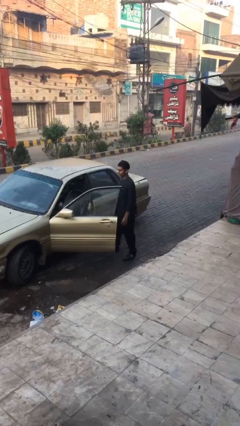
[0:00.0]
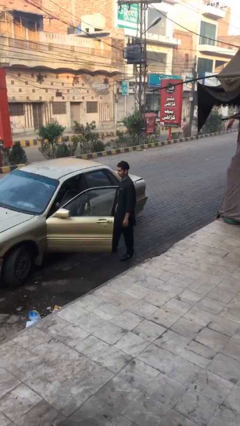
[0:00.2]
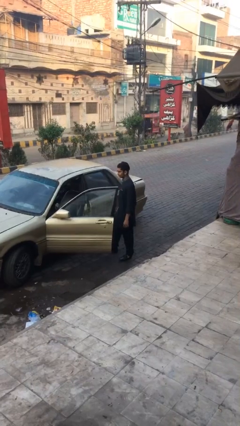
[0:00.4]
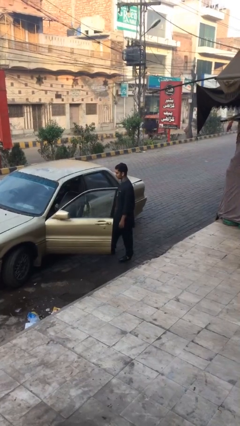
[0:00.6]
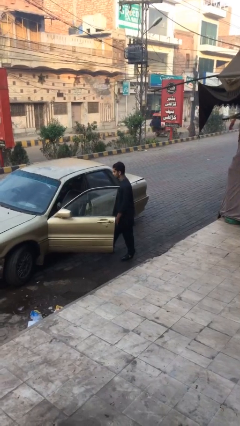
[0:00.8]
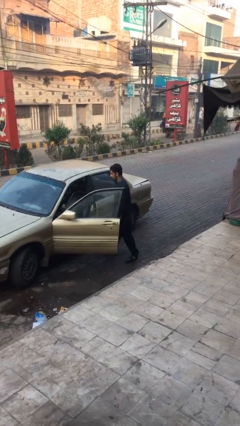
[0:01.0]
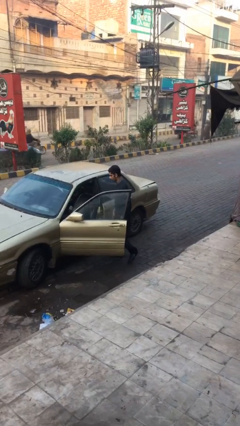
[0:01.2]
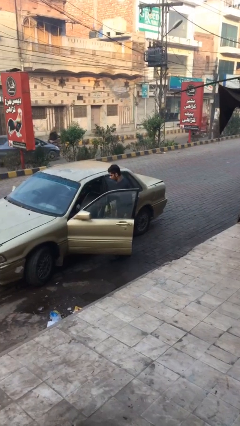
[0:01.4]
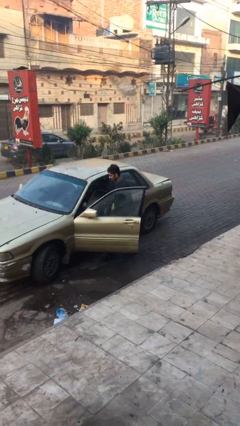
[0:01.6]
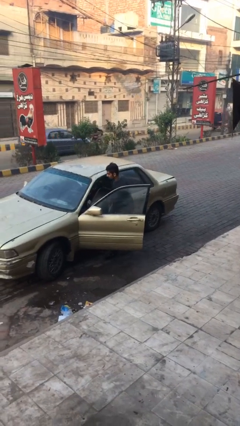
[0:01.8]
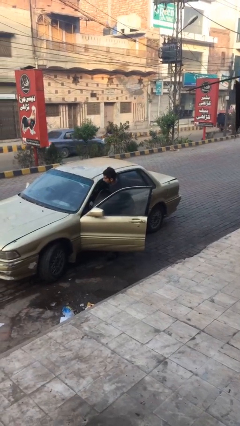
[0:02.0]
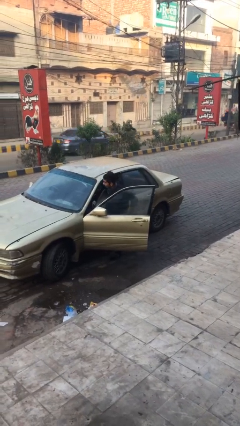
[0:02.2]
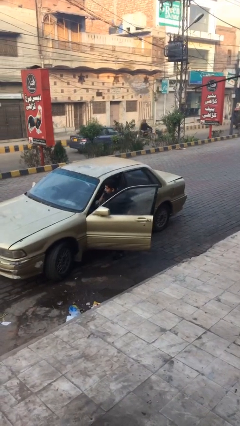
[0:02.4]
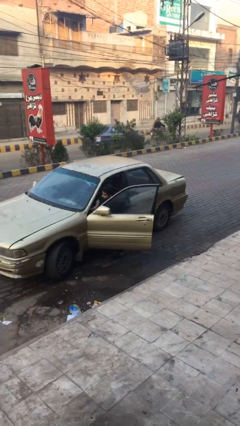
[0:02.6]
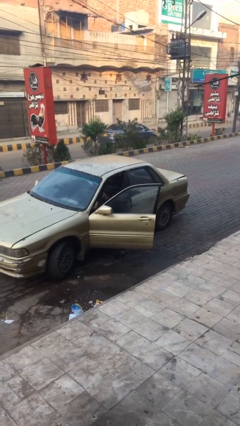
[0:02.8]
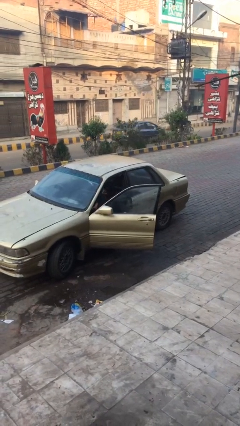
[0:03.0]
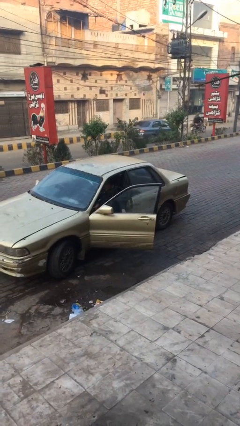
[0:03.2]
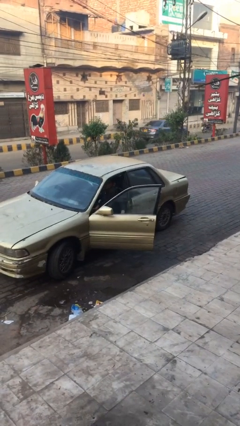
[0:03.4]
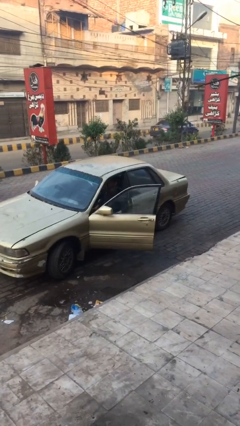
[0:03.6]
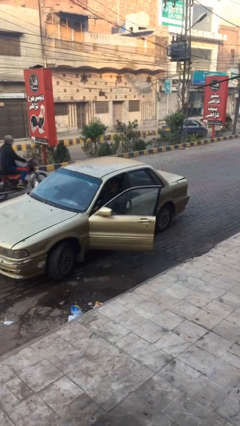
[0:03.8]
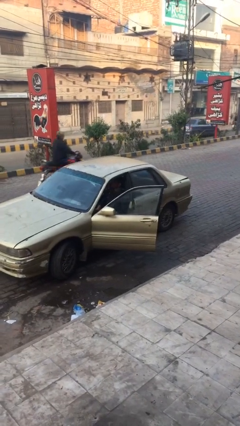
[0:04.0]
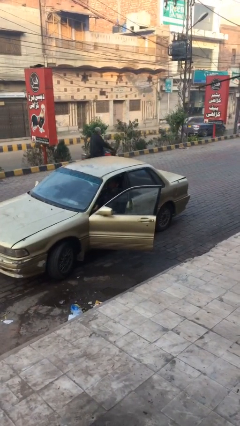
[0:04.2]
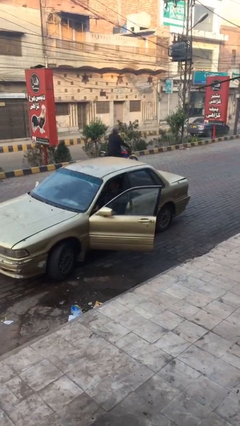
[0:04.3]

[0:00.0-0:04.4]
person enters car

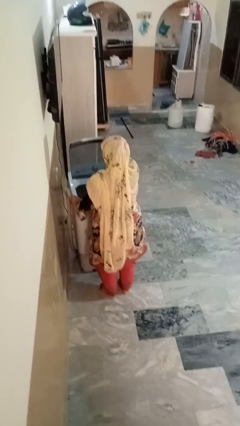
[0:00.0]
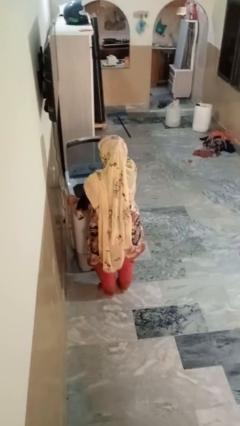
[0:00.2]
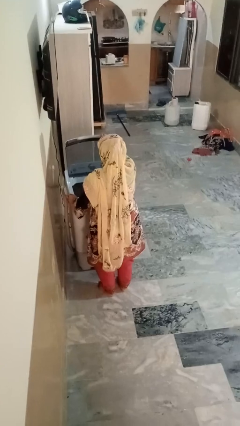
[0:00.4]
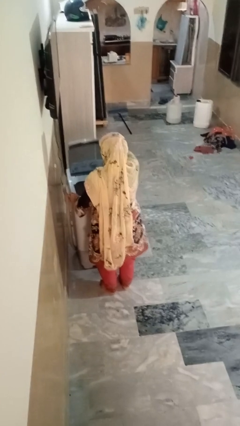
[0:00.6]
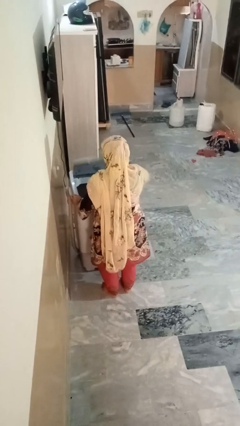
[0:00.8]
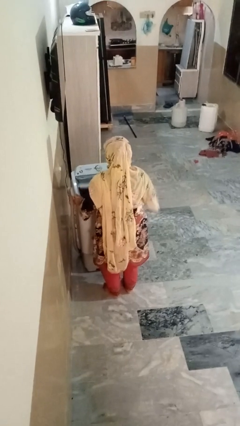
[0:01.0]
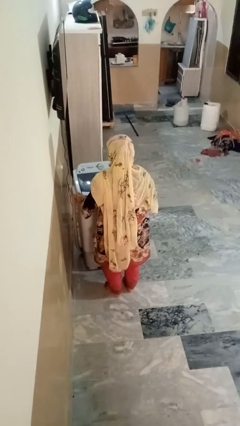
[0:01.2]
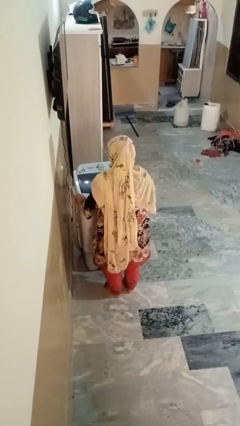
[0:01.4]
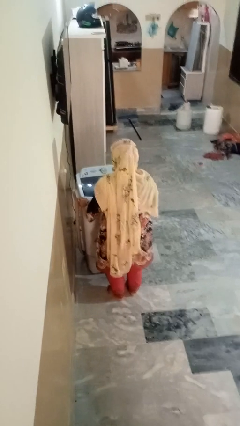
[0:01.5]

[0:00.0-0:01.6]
person closes clothes washer

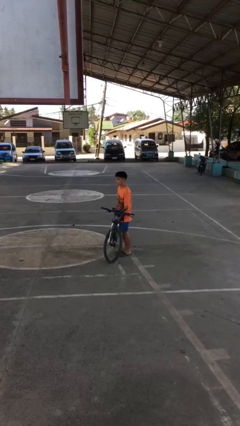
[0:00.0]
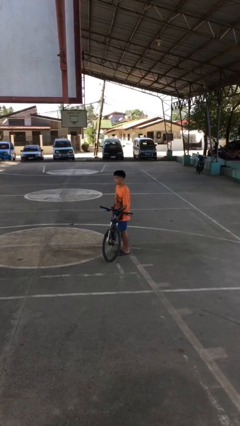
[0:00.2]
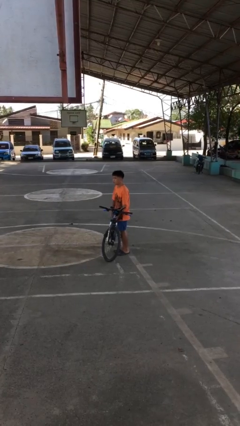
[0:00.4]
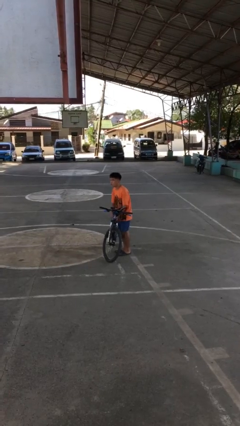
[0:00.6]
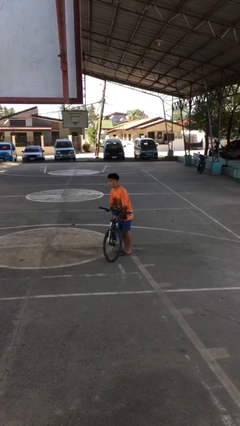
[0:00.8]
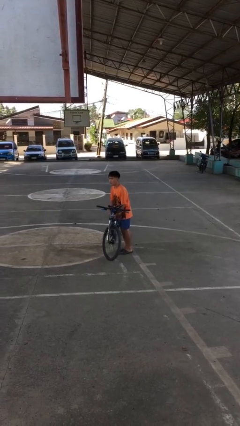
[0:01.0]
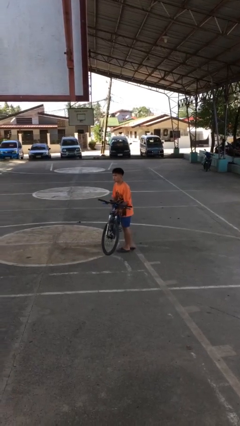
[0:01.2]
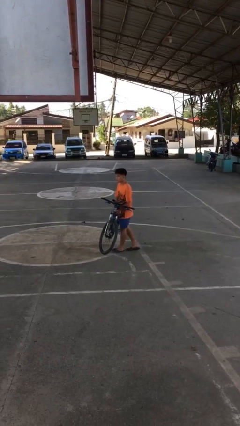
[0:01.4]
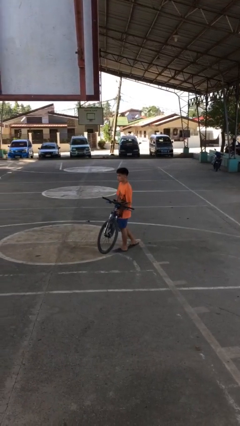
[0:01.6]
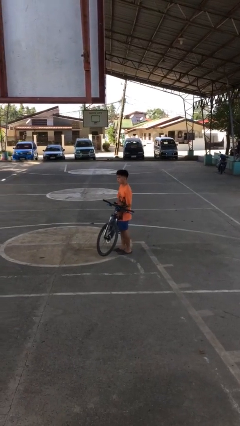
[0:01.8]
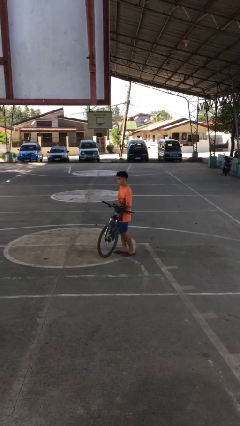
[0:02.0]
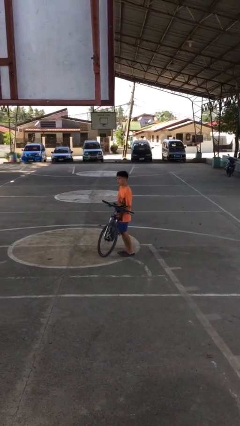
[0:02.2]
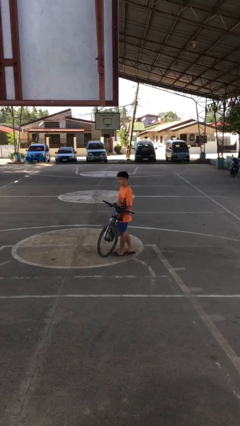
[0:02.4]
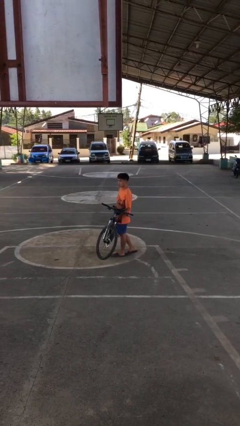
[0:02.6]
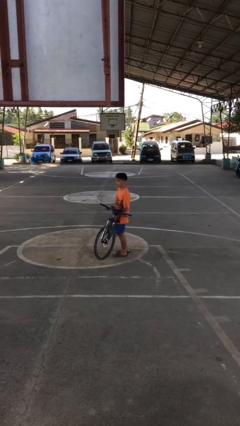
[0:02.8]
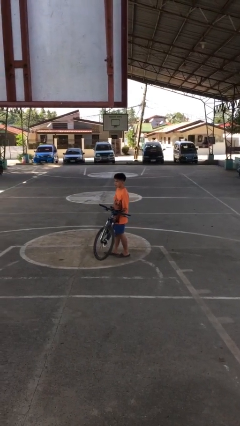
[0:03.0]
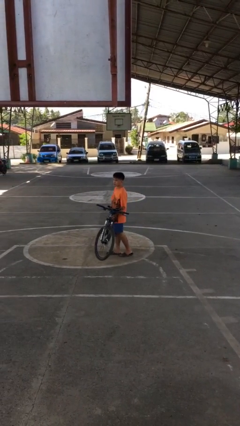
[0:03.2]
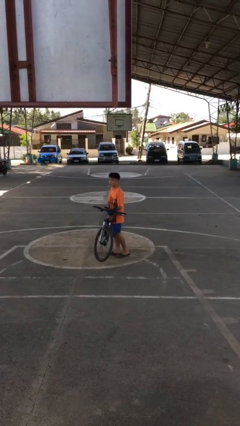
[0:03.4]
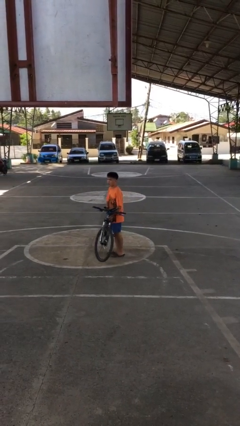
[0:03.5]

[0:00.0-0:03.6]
person carries bicycle

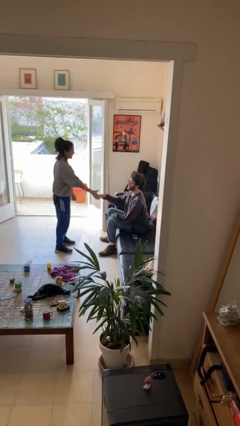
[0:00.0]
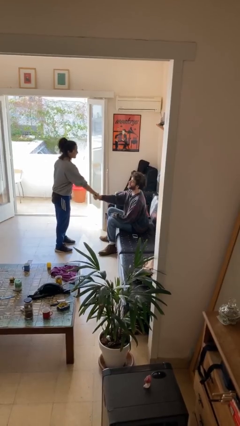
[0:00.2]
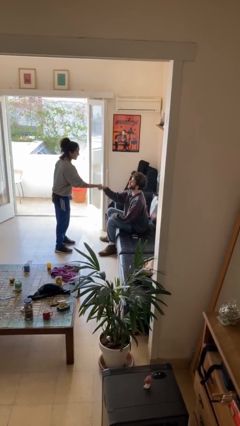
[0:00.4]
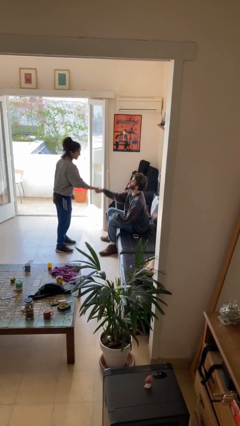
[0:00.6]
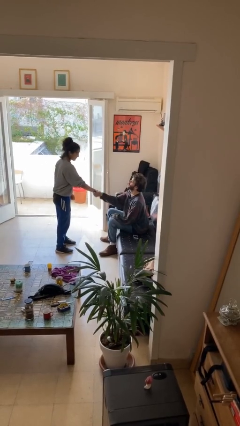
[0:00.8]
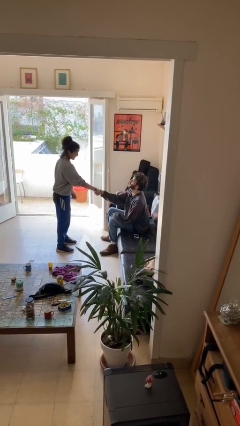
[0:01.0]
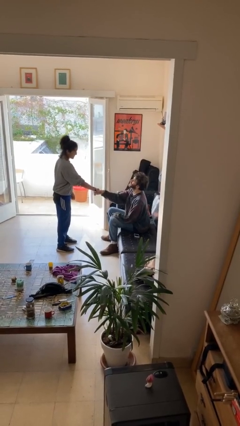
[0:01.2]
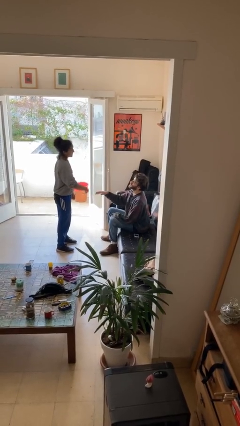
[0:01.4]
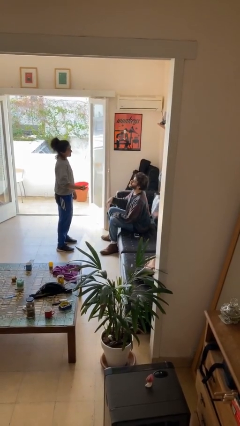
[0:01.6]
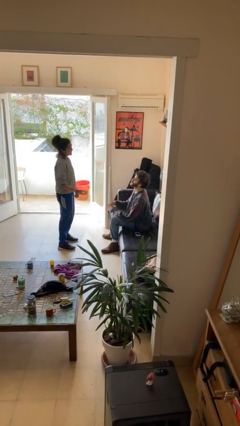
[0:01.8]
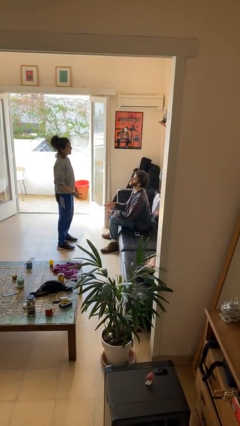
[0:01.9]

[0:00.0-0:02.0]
person shakes hand

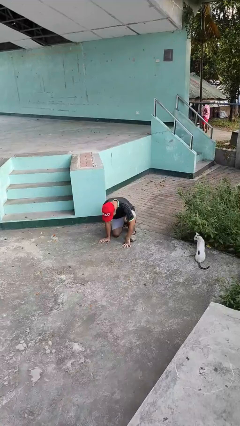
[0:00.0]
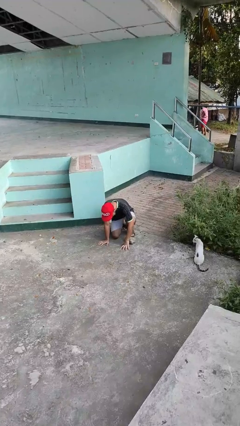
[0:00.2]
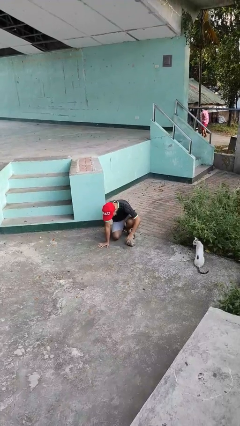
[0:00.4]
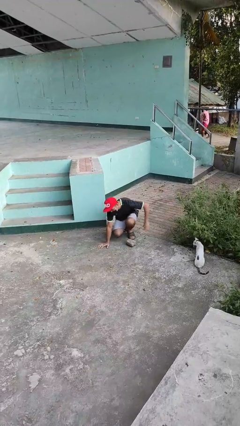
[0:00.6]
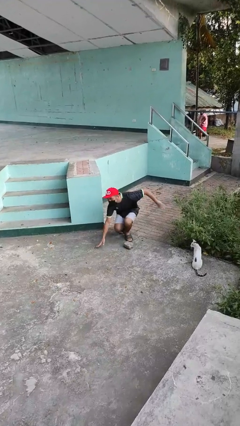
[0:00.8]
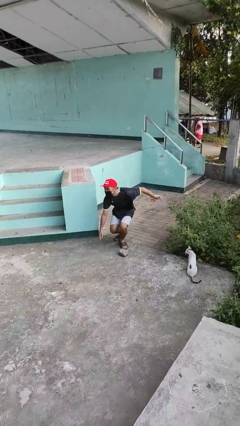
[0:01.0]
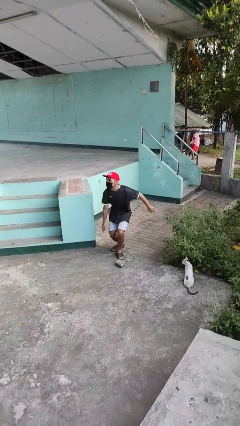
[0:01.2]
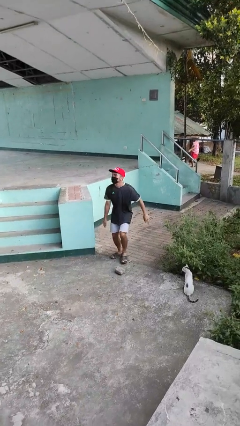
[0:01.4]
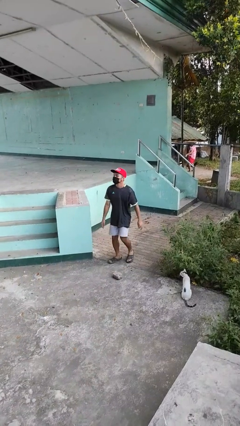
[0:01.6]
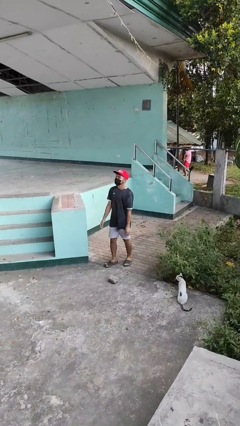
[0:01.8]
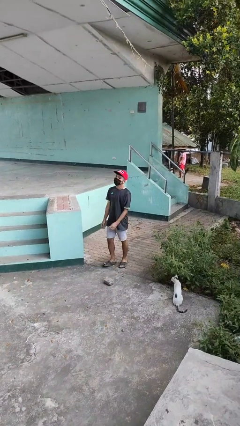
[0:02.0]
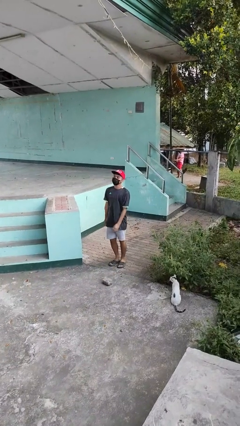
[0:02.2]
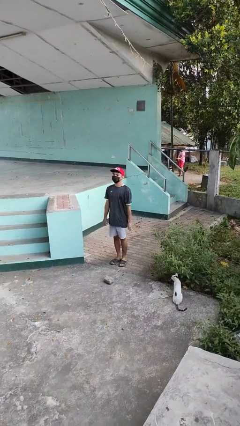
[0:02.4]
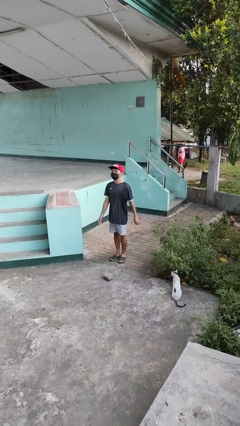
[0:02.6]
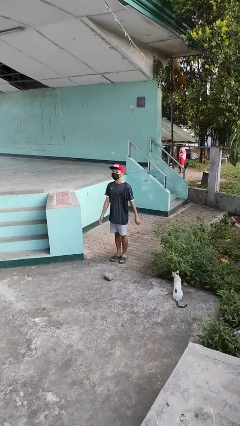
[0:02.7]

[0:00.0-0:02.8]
person stands up from floor

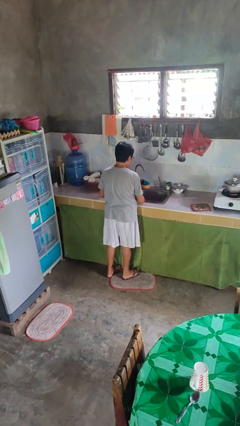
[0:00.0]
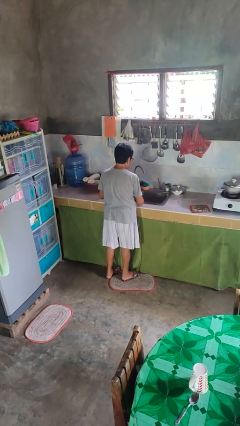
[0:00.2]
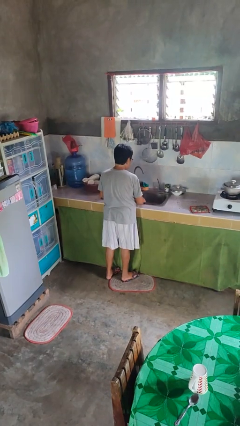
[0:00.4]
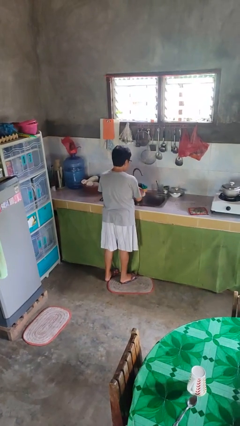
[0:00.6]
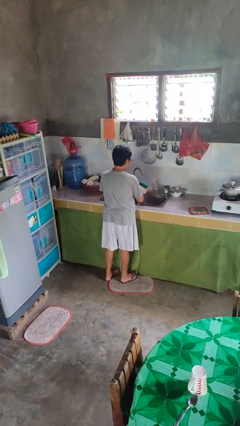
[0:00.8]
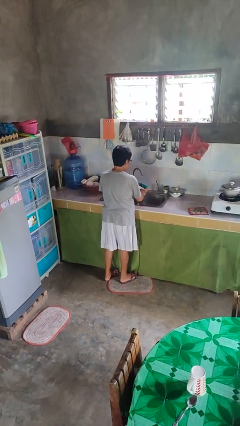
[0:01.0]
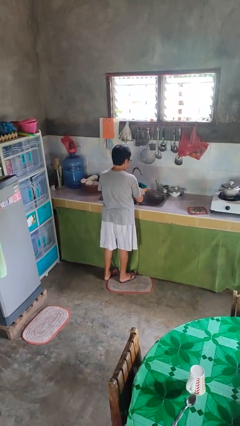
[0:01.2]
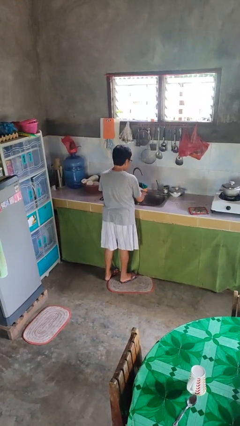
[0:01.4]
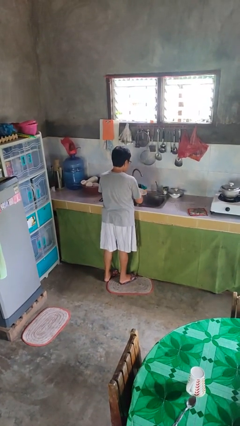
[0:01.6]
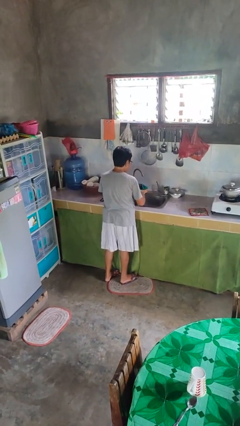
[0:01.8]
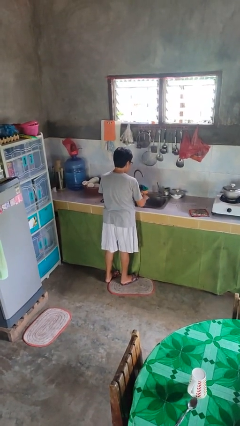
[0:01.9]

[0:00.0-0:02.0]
person washes dish

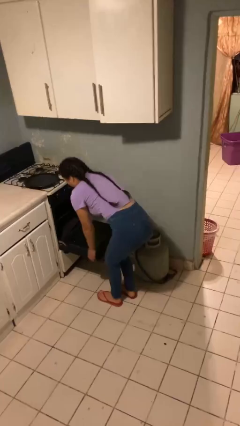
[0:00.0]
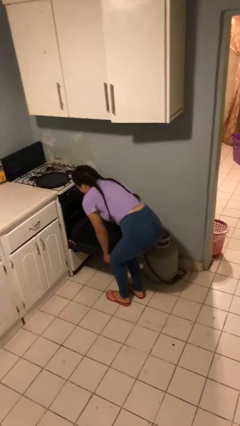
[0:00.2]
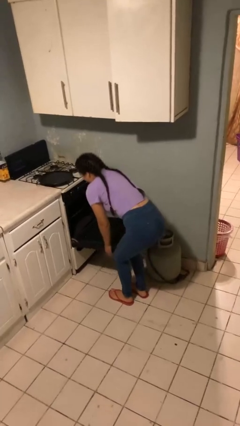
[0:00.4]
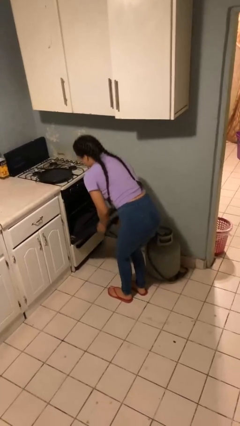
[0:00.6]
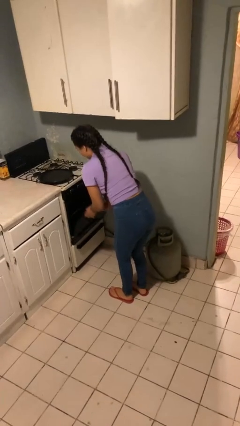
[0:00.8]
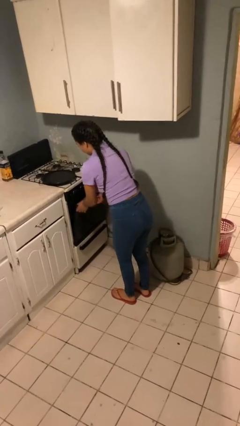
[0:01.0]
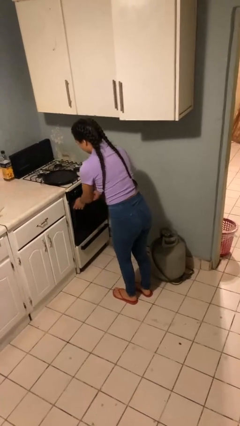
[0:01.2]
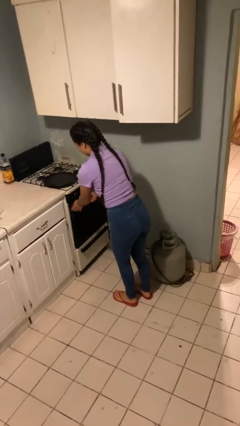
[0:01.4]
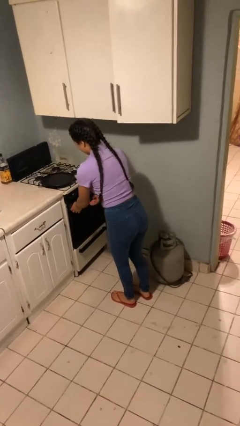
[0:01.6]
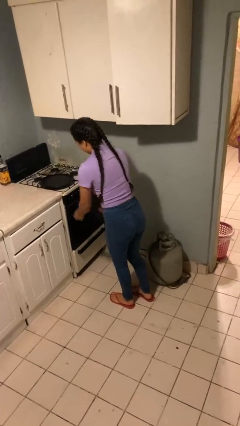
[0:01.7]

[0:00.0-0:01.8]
person closes oven door
